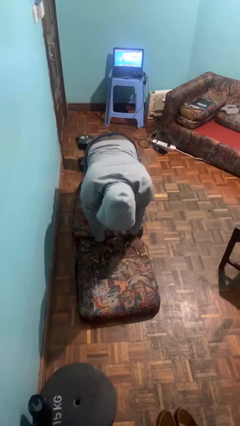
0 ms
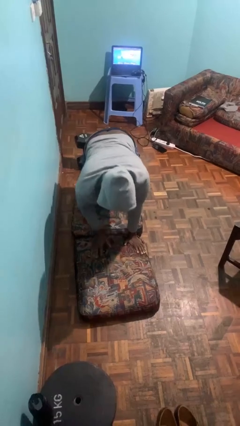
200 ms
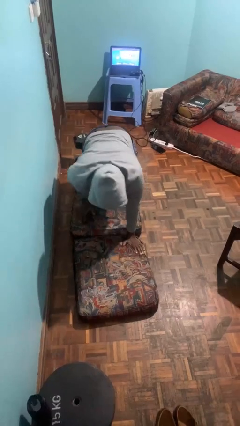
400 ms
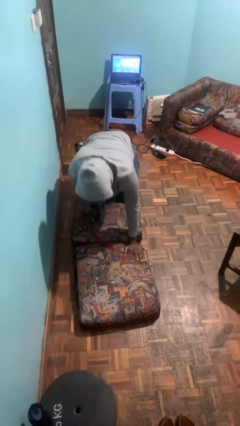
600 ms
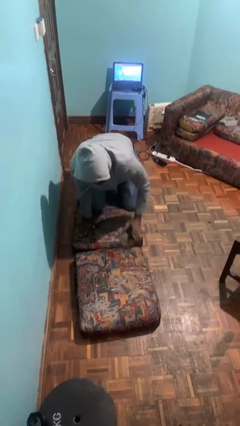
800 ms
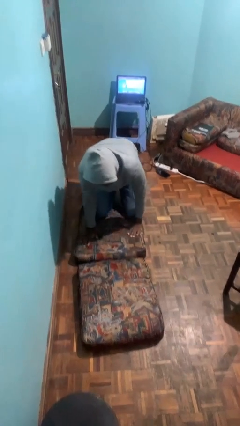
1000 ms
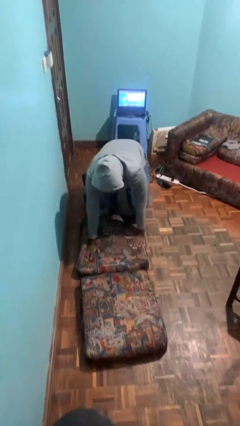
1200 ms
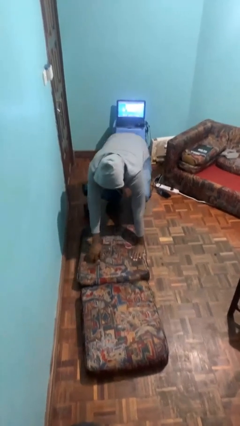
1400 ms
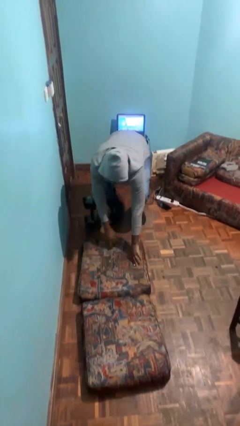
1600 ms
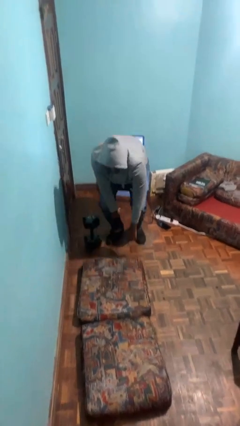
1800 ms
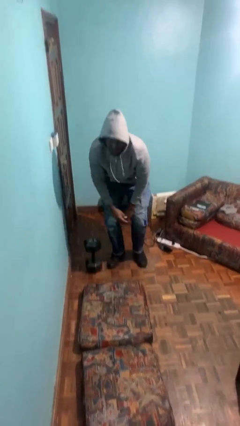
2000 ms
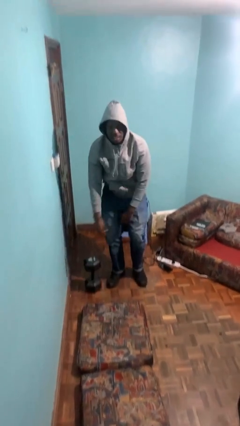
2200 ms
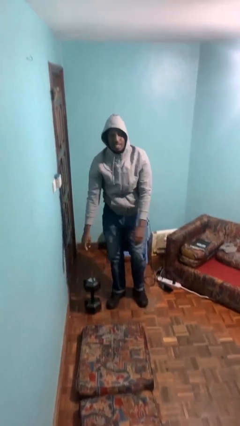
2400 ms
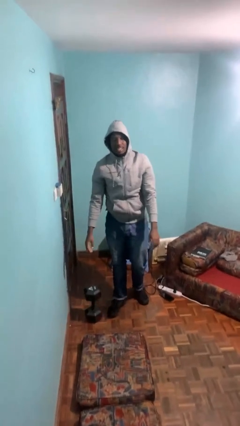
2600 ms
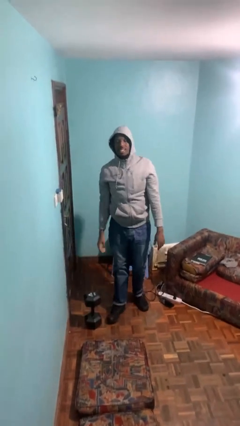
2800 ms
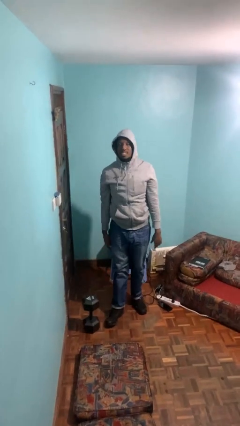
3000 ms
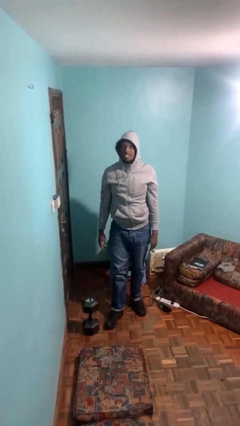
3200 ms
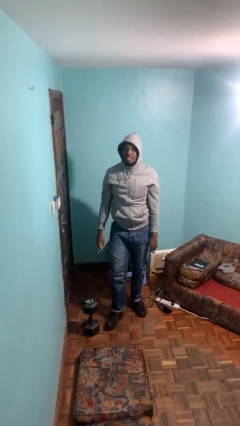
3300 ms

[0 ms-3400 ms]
person stands up from floor

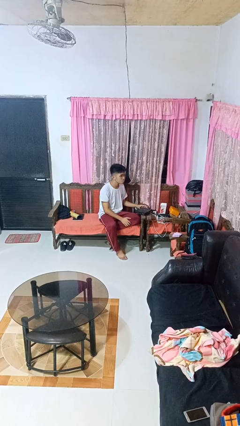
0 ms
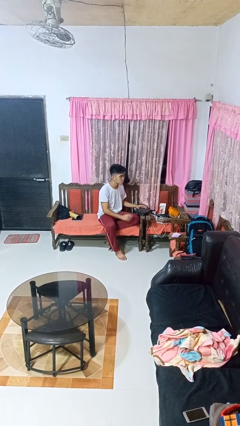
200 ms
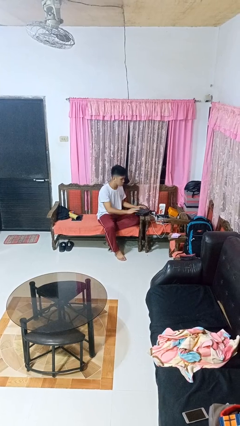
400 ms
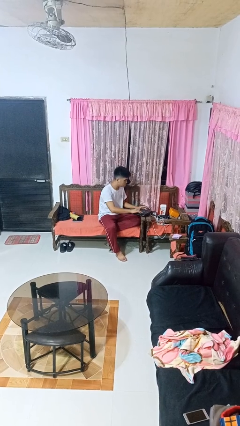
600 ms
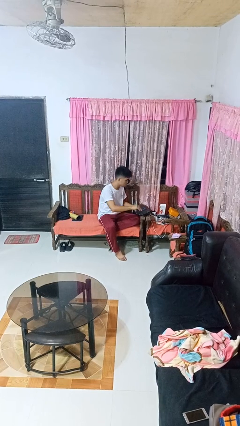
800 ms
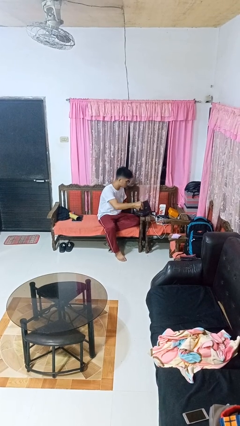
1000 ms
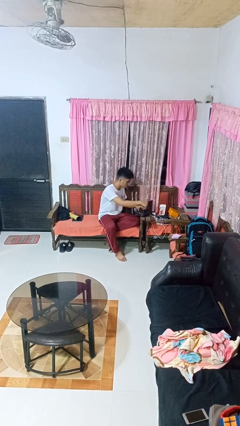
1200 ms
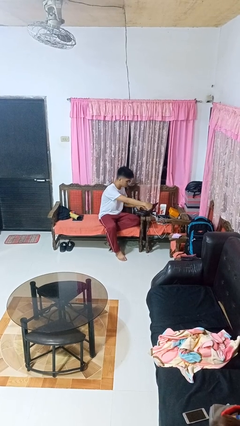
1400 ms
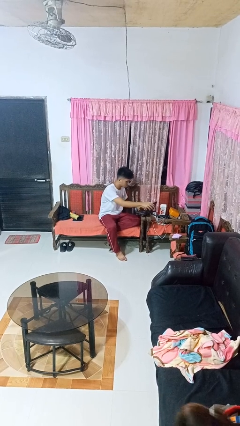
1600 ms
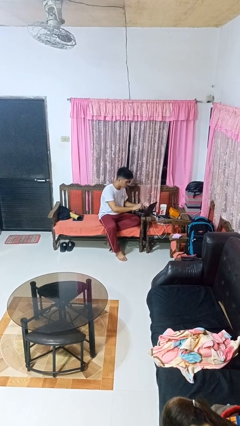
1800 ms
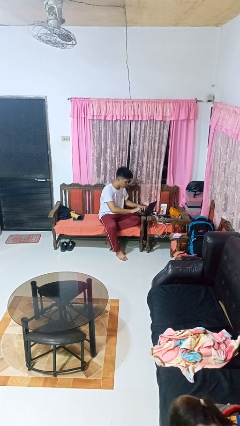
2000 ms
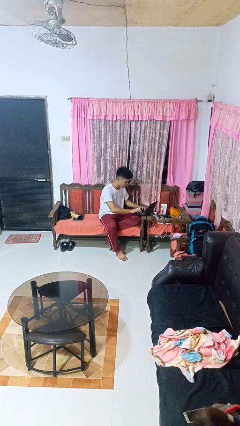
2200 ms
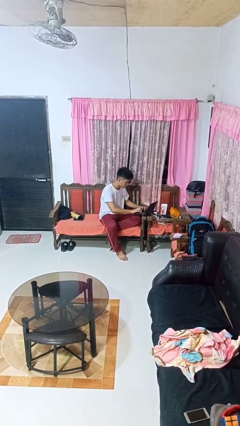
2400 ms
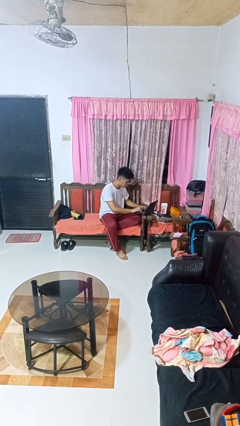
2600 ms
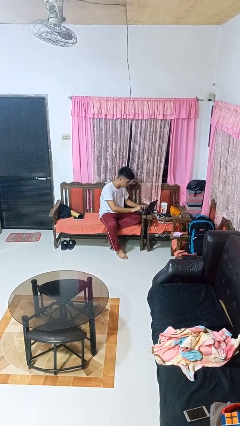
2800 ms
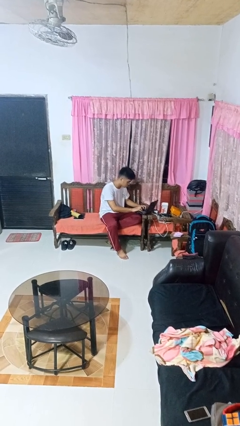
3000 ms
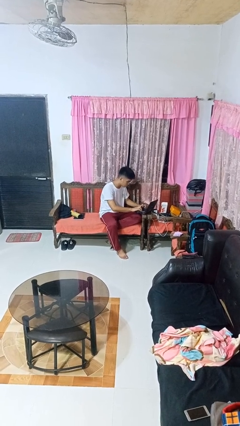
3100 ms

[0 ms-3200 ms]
person opens laptop

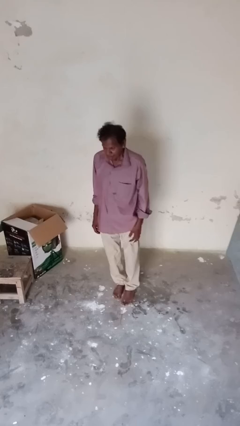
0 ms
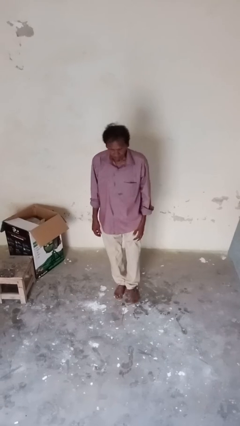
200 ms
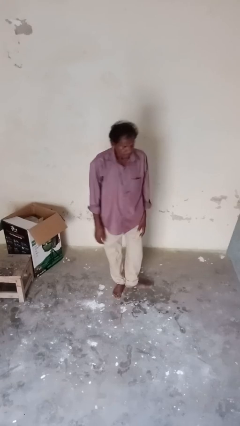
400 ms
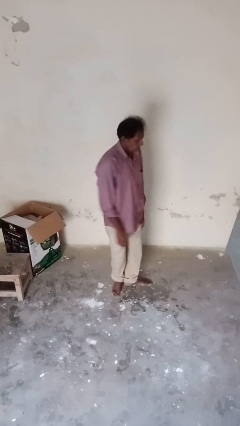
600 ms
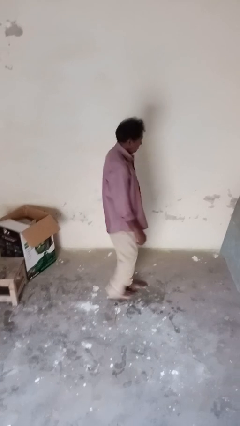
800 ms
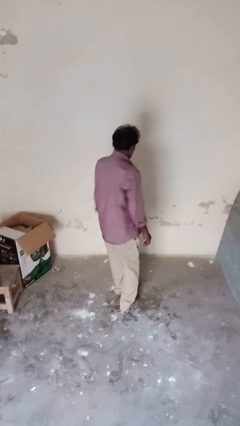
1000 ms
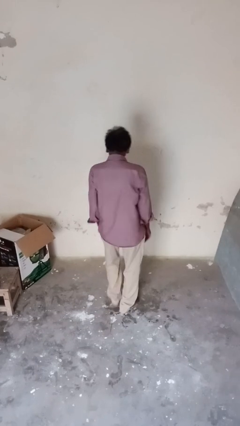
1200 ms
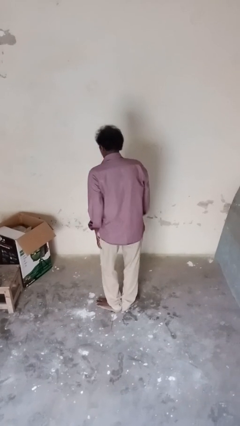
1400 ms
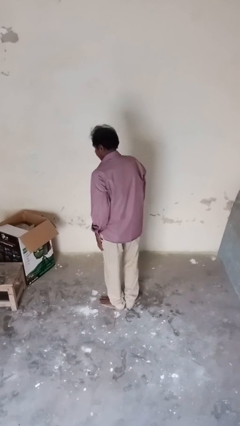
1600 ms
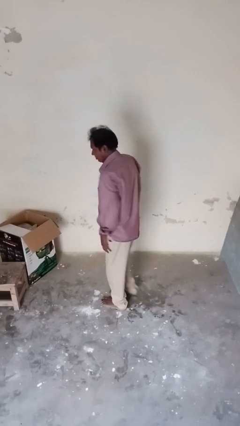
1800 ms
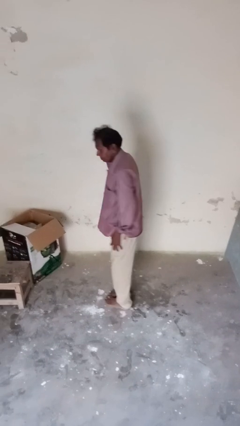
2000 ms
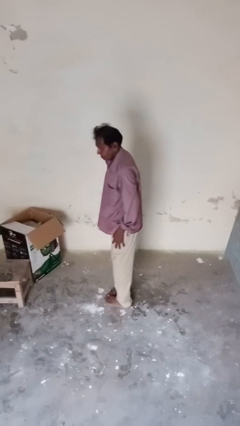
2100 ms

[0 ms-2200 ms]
person twirls

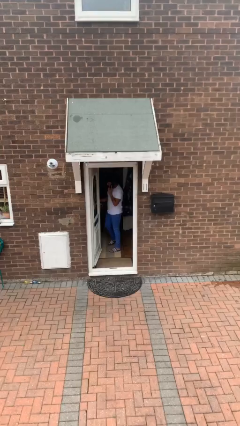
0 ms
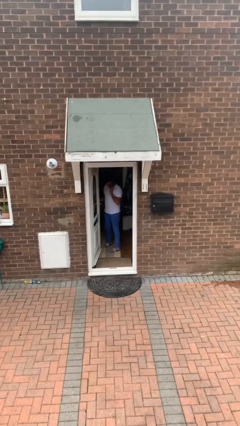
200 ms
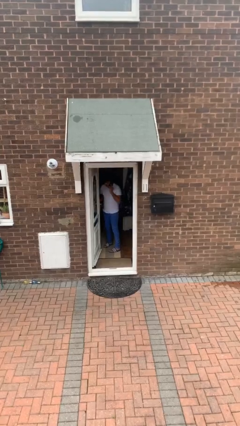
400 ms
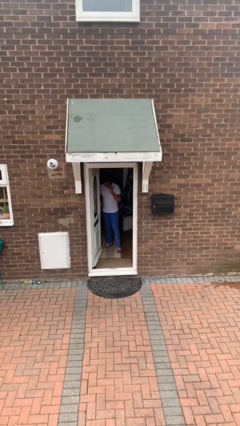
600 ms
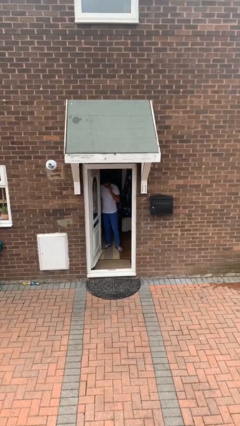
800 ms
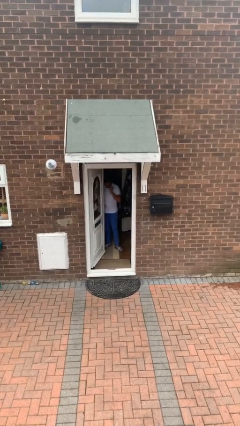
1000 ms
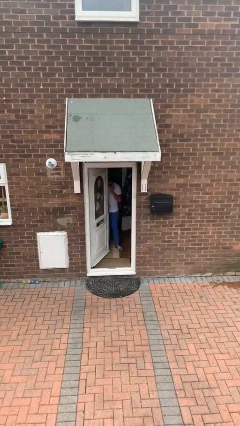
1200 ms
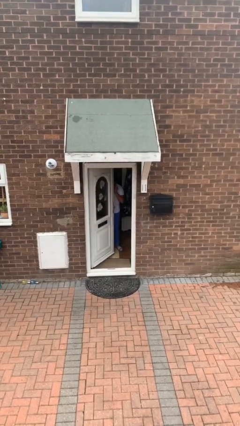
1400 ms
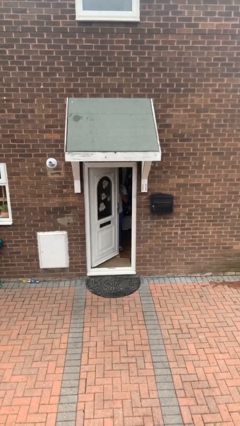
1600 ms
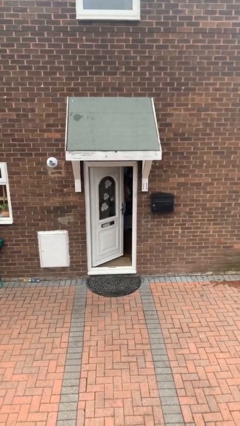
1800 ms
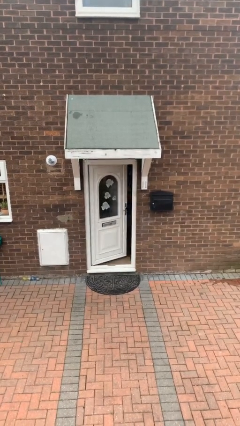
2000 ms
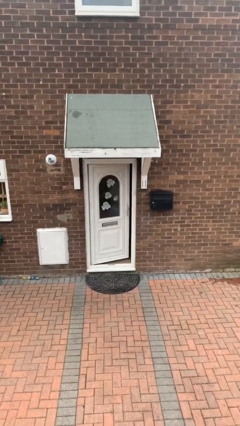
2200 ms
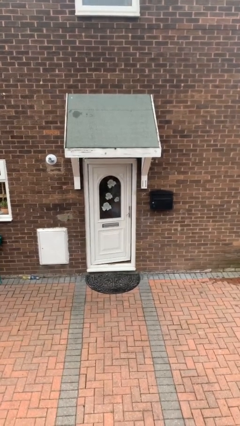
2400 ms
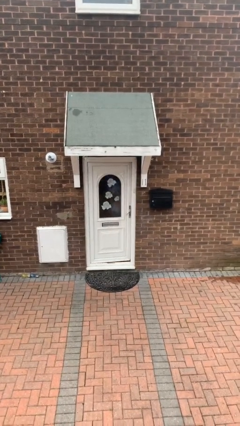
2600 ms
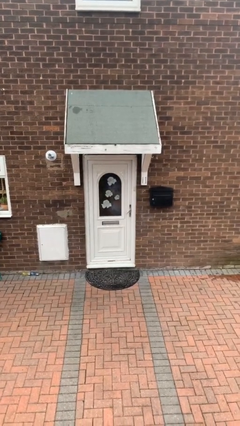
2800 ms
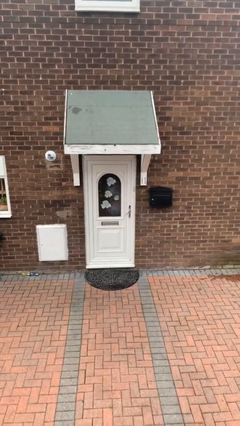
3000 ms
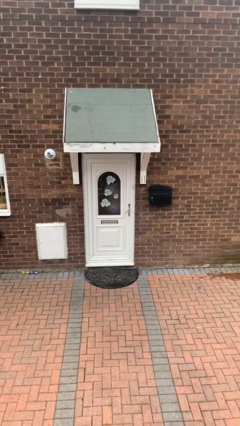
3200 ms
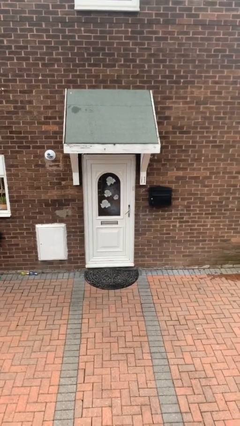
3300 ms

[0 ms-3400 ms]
person closes facility door

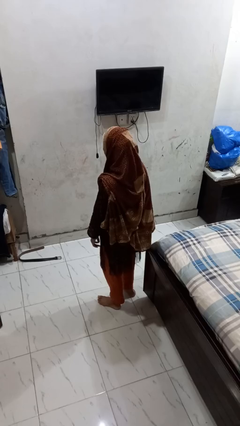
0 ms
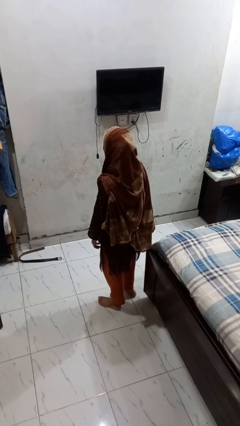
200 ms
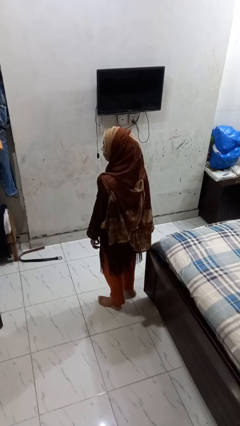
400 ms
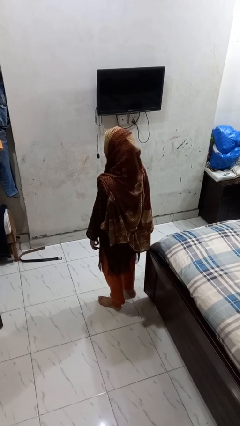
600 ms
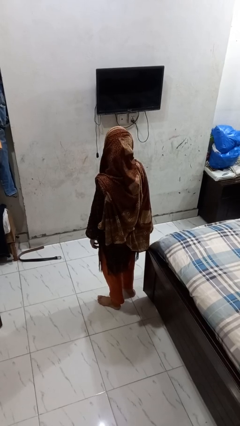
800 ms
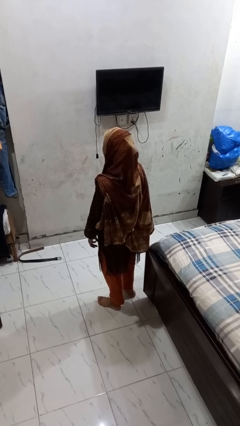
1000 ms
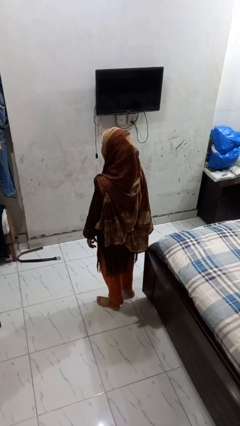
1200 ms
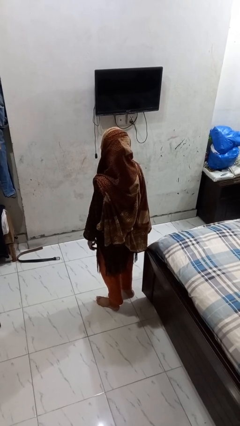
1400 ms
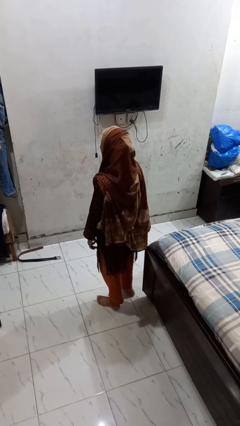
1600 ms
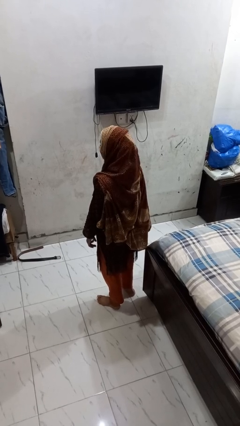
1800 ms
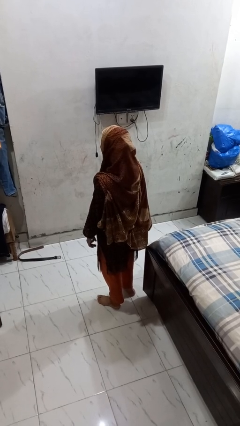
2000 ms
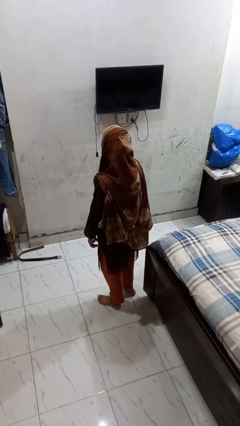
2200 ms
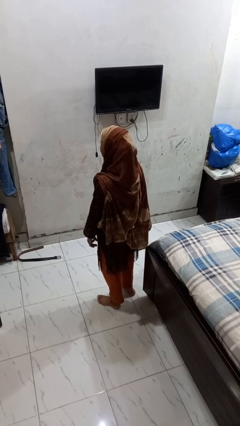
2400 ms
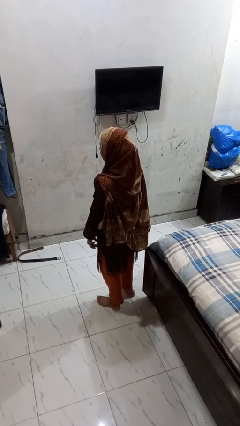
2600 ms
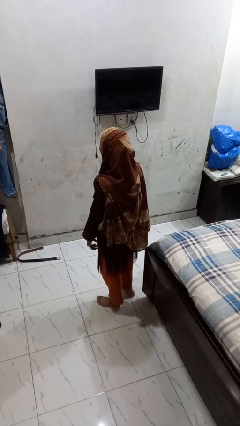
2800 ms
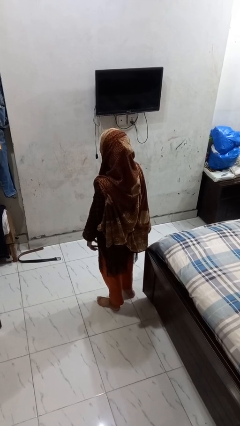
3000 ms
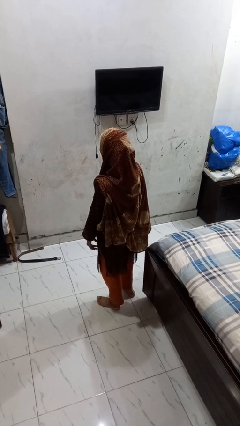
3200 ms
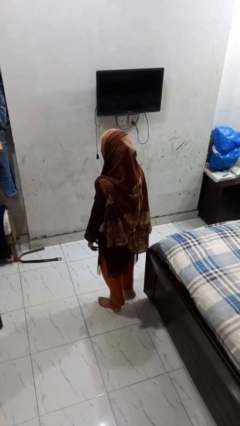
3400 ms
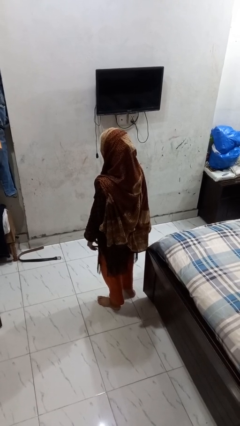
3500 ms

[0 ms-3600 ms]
person shakes head

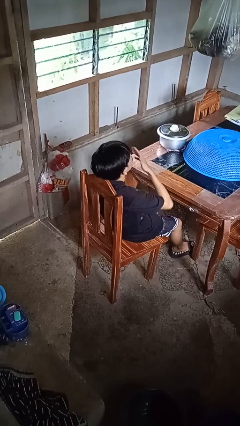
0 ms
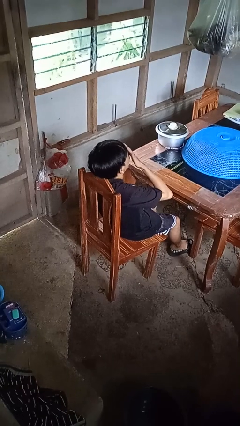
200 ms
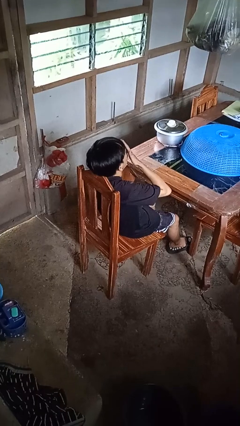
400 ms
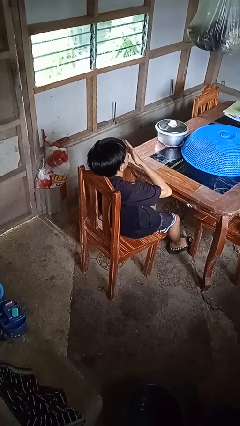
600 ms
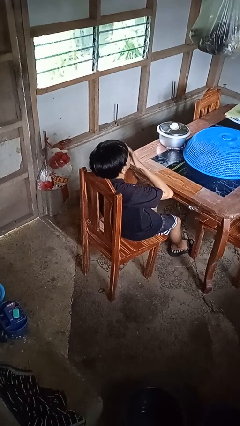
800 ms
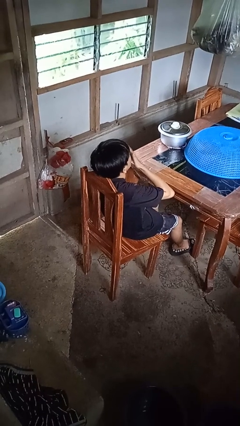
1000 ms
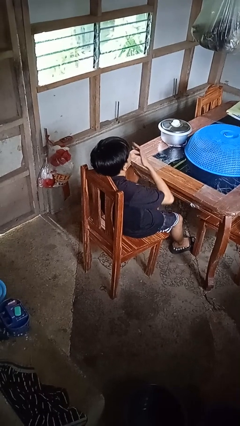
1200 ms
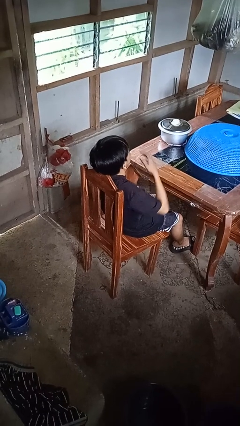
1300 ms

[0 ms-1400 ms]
person yawns

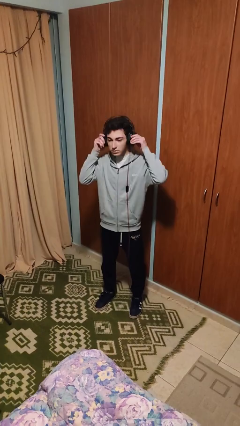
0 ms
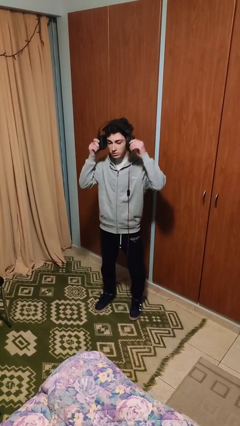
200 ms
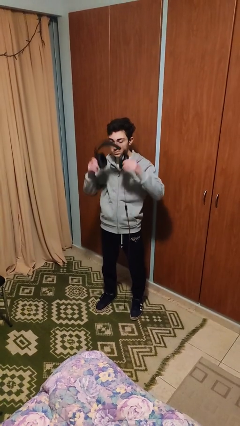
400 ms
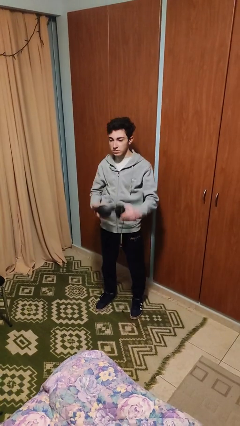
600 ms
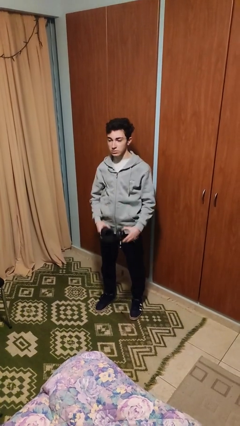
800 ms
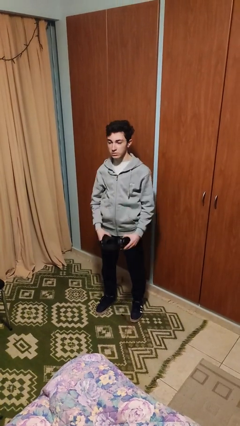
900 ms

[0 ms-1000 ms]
person takes off headphones
